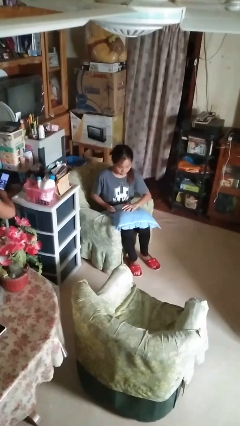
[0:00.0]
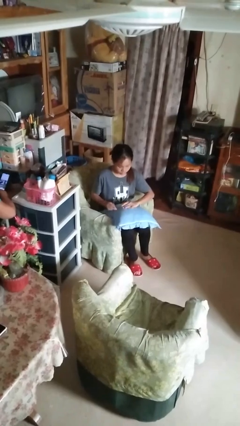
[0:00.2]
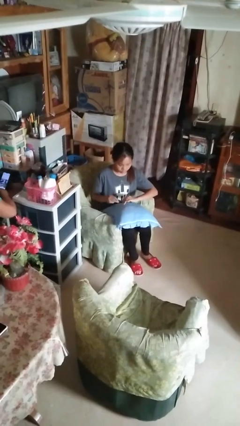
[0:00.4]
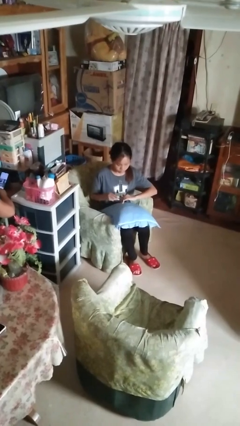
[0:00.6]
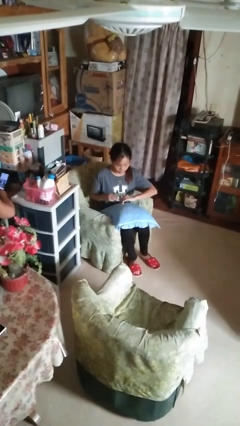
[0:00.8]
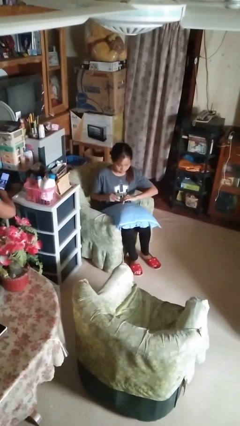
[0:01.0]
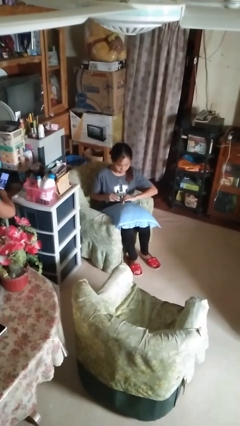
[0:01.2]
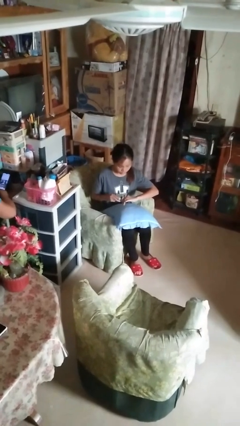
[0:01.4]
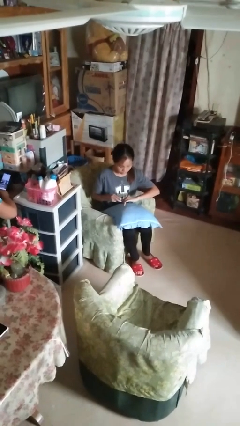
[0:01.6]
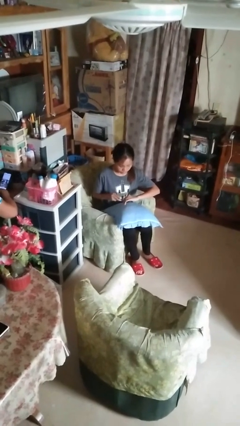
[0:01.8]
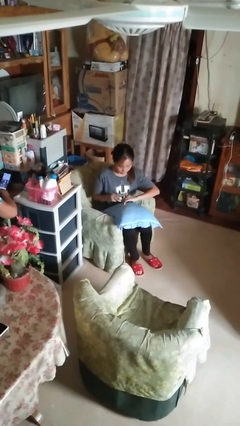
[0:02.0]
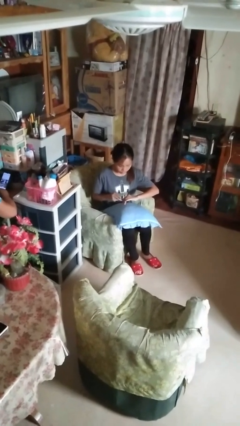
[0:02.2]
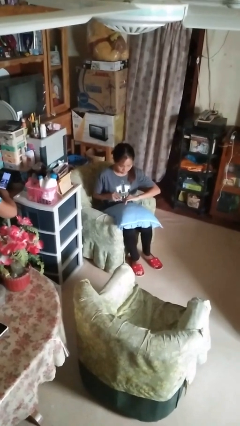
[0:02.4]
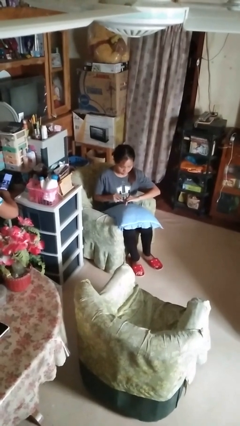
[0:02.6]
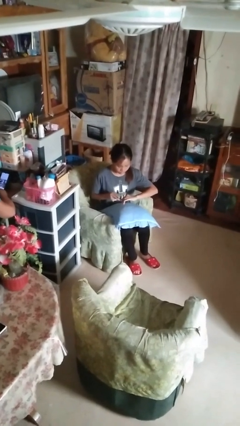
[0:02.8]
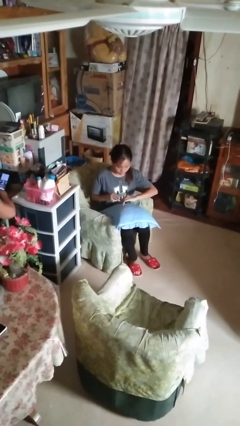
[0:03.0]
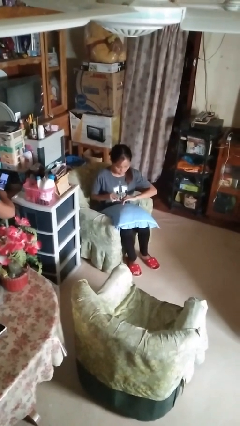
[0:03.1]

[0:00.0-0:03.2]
person files fingernails

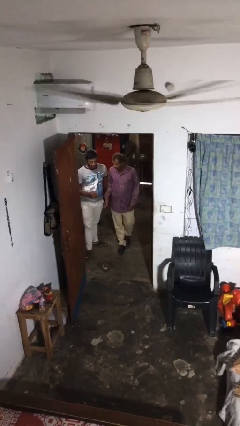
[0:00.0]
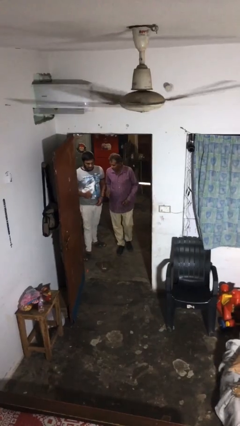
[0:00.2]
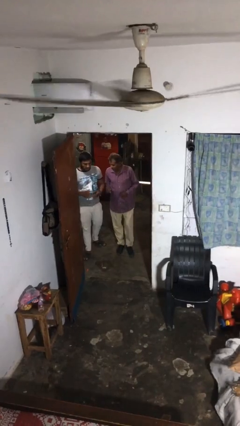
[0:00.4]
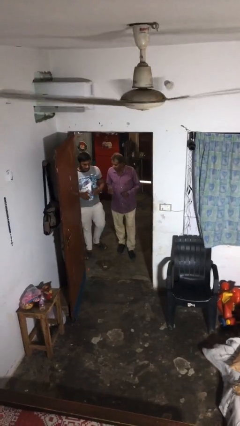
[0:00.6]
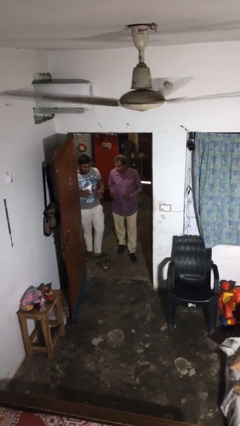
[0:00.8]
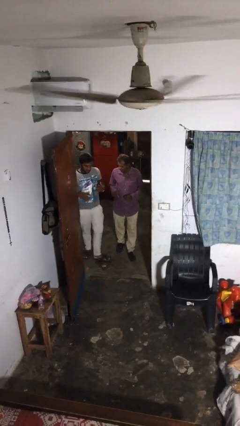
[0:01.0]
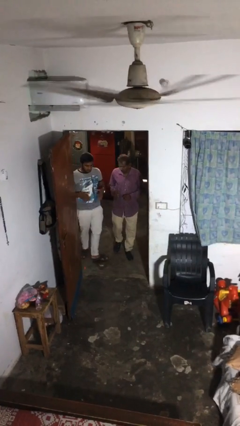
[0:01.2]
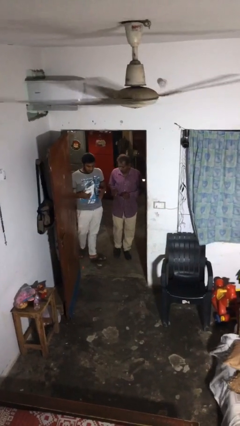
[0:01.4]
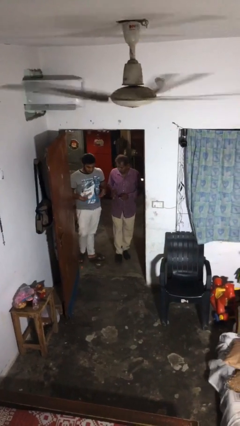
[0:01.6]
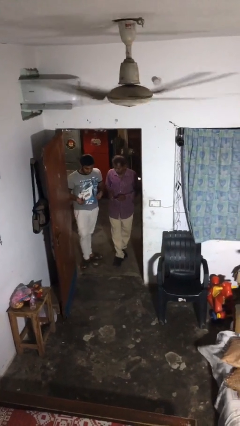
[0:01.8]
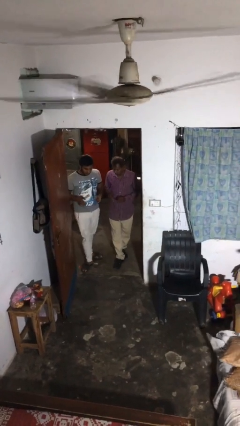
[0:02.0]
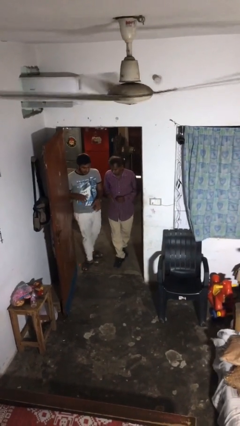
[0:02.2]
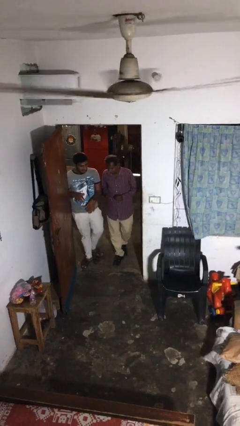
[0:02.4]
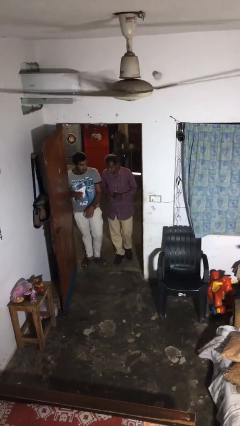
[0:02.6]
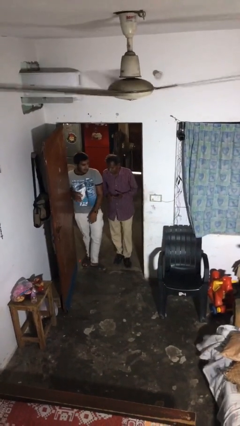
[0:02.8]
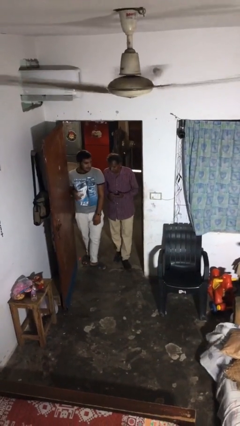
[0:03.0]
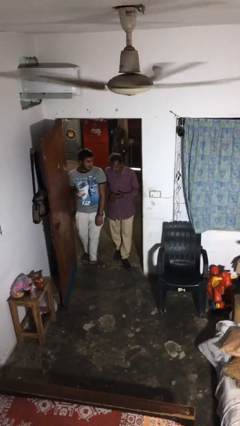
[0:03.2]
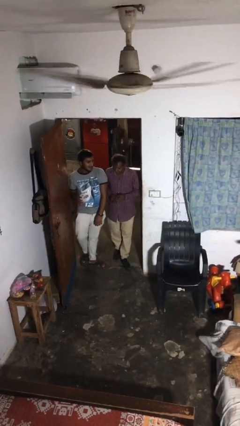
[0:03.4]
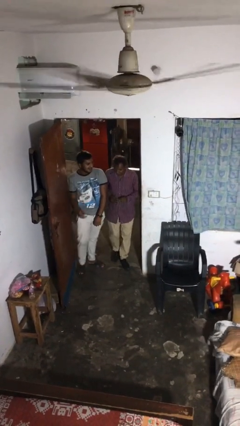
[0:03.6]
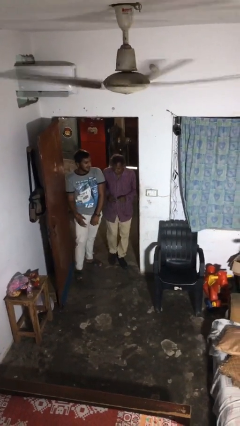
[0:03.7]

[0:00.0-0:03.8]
person talks to person

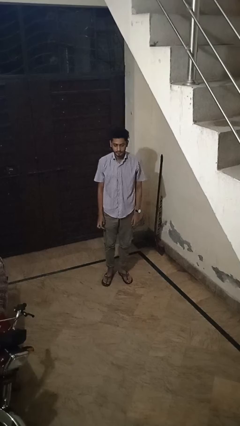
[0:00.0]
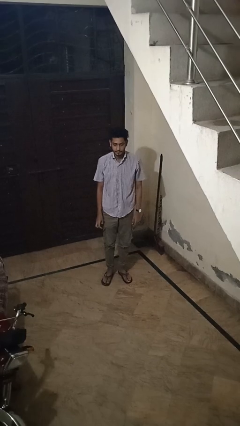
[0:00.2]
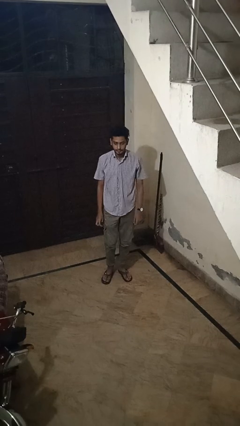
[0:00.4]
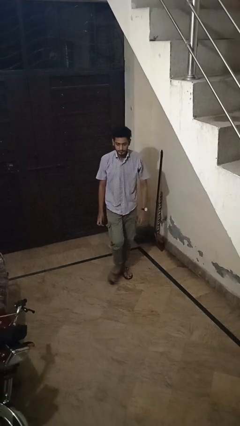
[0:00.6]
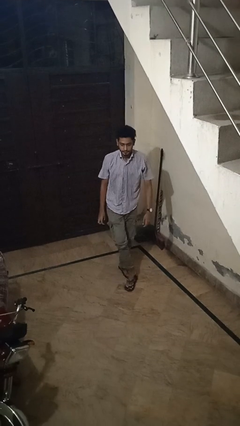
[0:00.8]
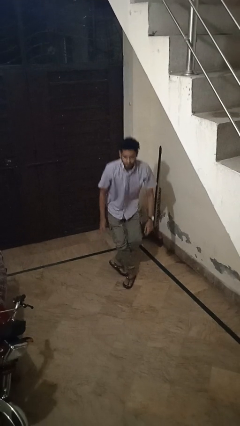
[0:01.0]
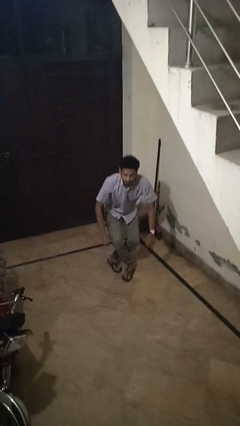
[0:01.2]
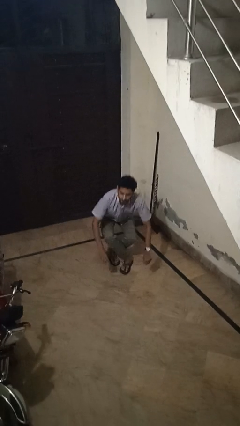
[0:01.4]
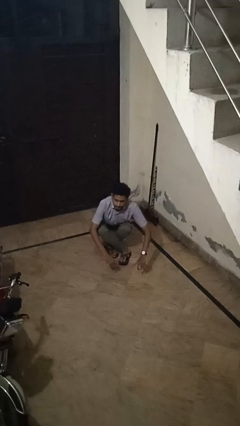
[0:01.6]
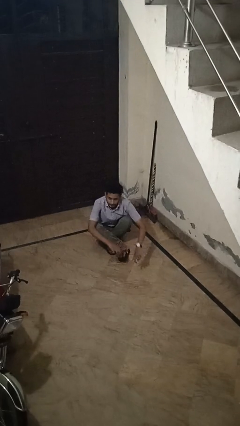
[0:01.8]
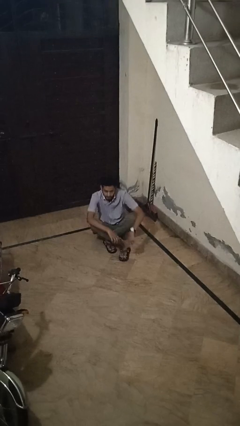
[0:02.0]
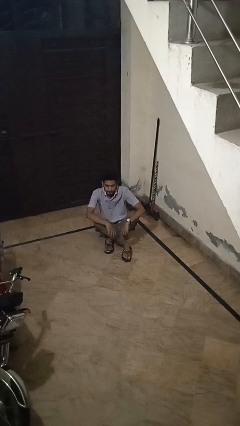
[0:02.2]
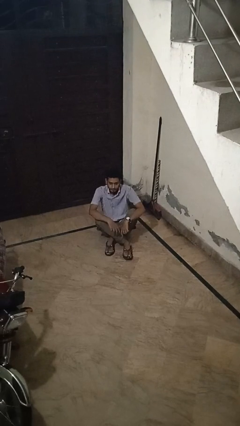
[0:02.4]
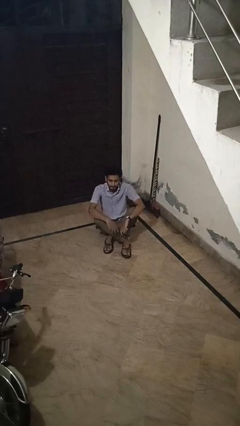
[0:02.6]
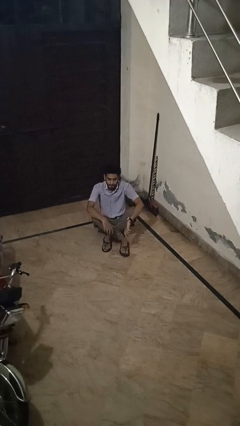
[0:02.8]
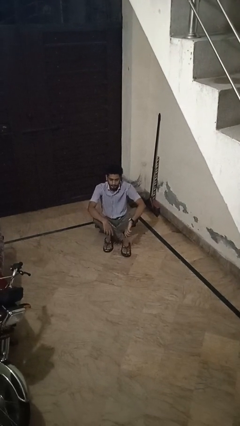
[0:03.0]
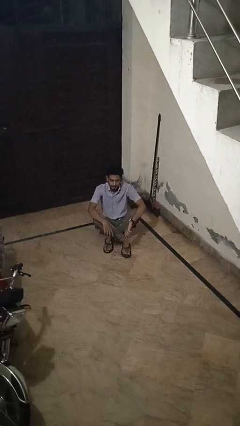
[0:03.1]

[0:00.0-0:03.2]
person sits crisscross

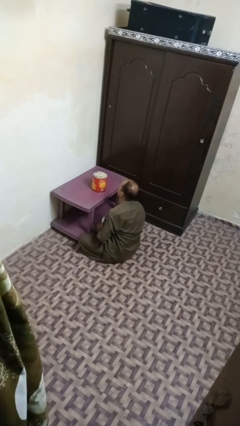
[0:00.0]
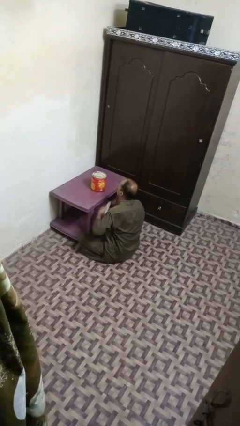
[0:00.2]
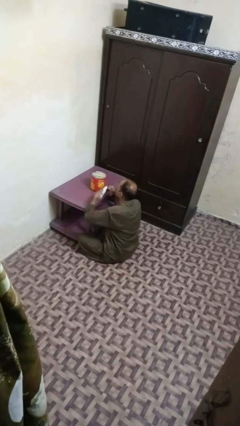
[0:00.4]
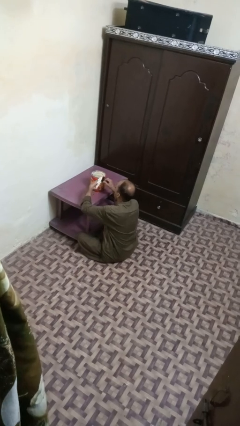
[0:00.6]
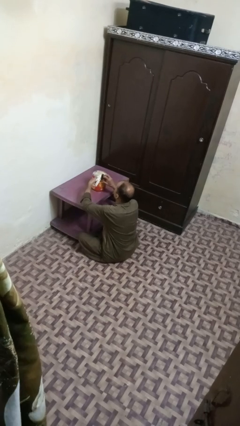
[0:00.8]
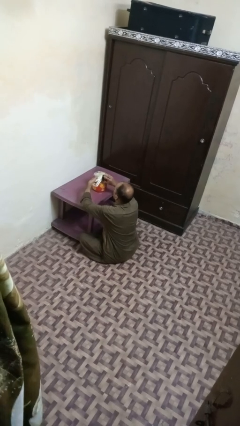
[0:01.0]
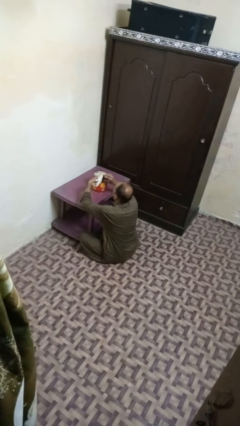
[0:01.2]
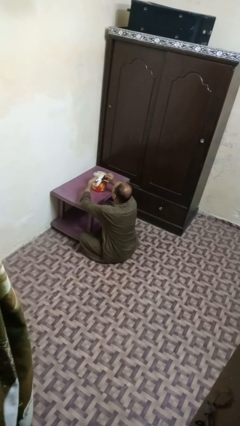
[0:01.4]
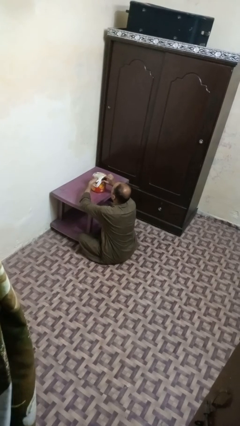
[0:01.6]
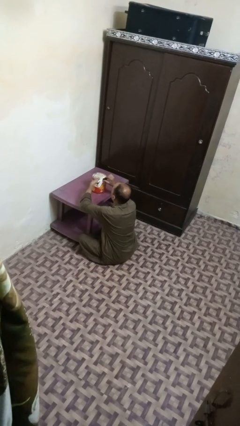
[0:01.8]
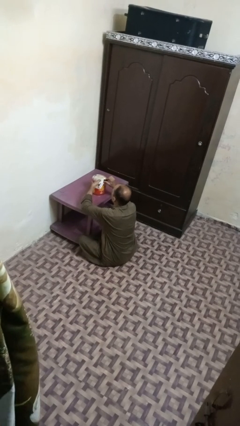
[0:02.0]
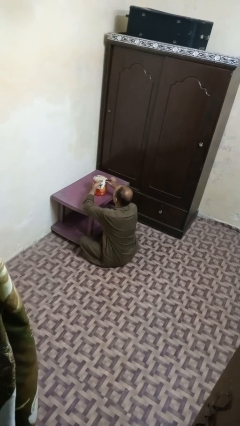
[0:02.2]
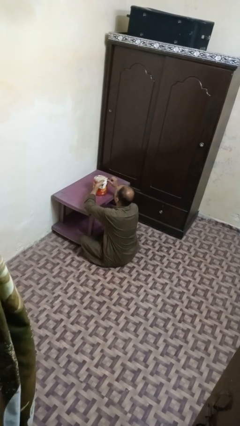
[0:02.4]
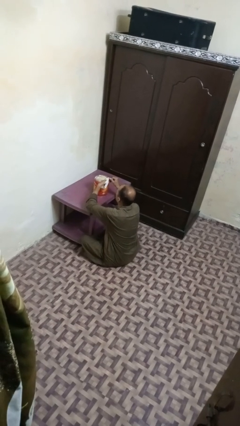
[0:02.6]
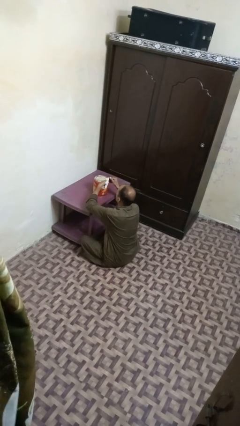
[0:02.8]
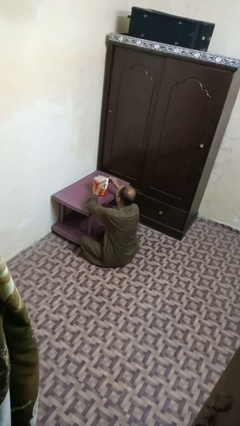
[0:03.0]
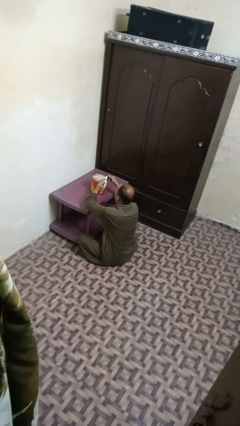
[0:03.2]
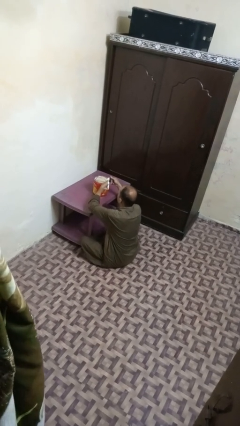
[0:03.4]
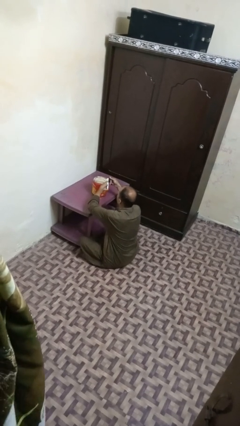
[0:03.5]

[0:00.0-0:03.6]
person opens can with can opener

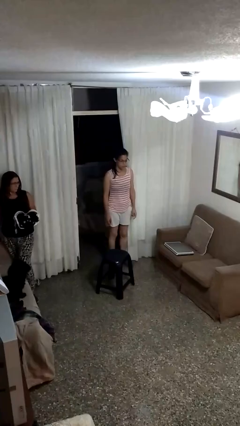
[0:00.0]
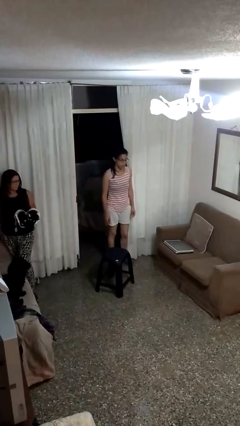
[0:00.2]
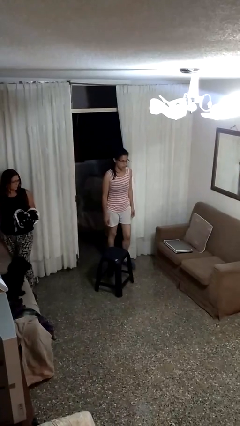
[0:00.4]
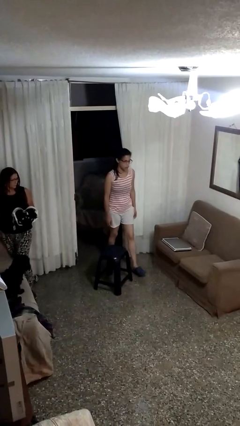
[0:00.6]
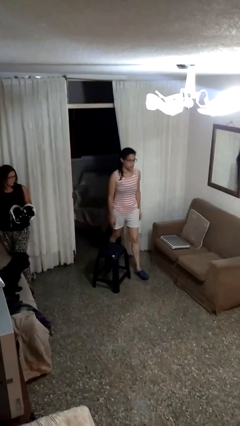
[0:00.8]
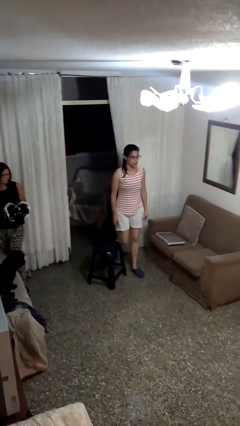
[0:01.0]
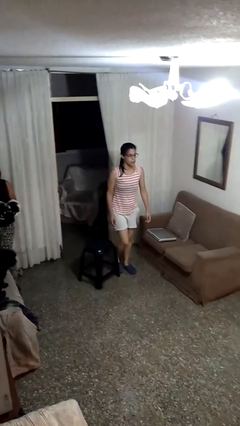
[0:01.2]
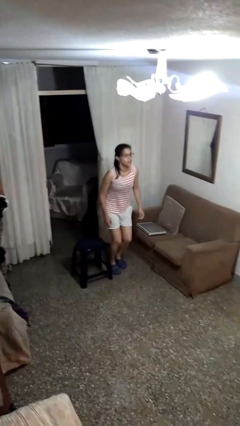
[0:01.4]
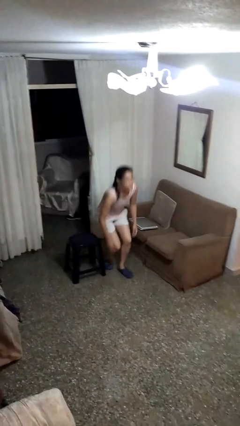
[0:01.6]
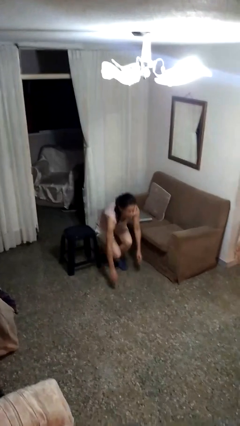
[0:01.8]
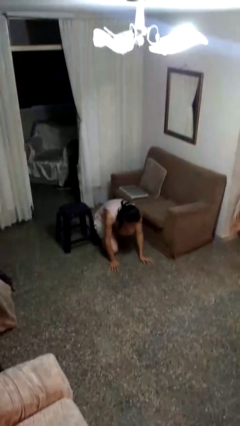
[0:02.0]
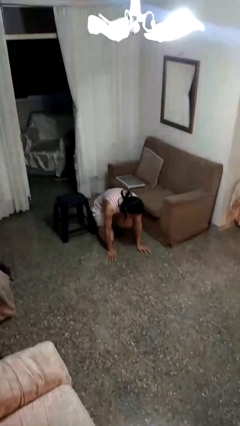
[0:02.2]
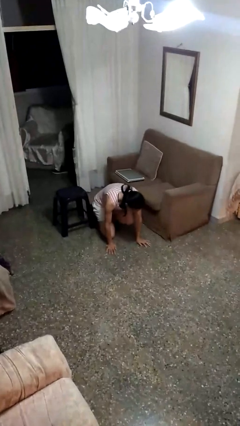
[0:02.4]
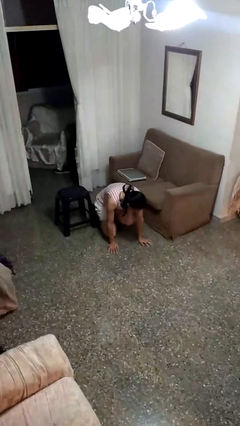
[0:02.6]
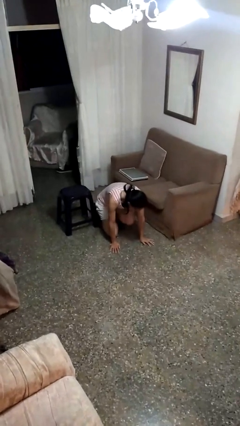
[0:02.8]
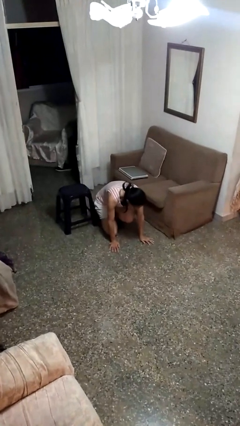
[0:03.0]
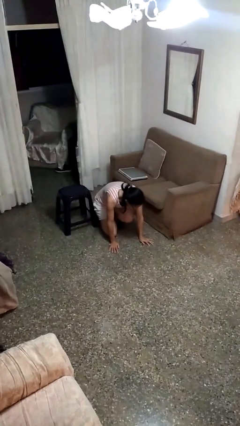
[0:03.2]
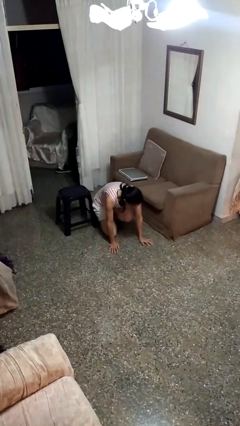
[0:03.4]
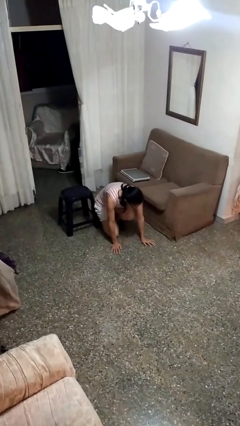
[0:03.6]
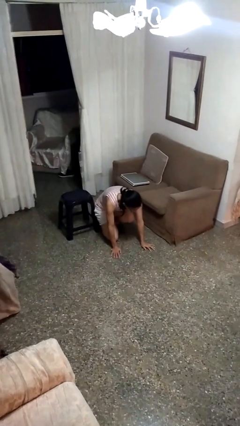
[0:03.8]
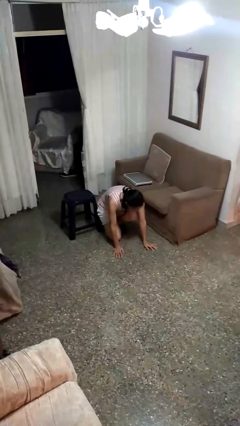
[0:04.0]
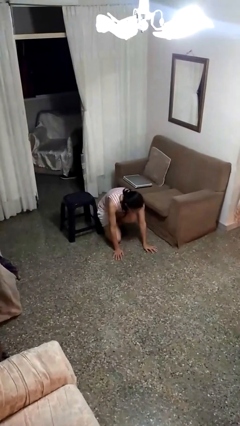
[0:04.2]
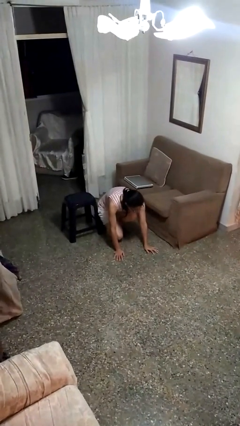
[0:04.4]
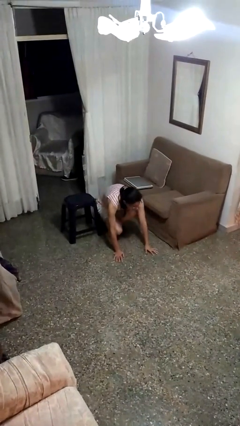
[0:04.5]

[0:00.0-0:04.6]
person trips on object on floor
